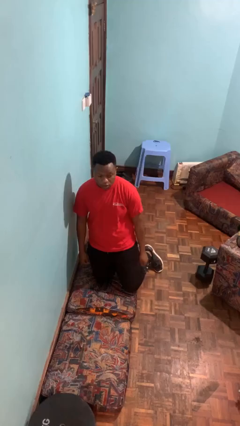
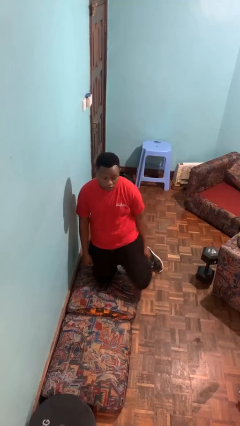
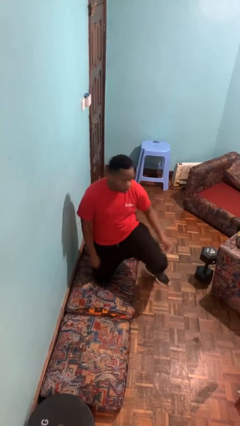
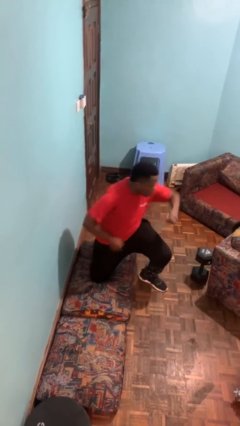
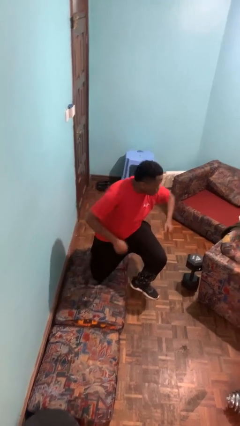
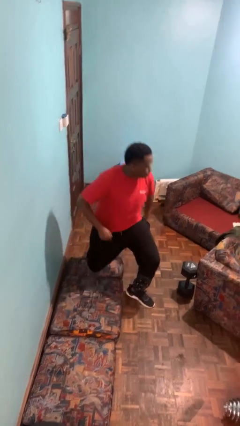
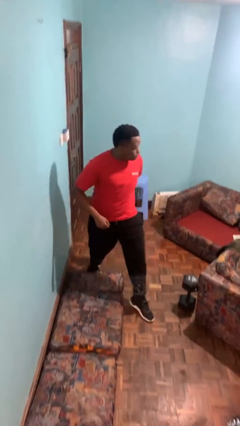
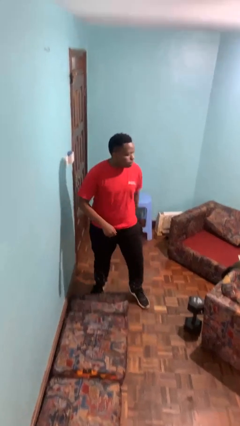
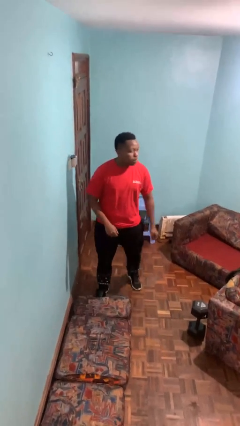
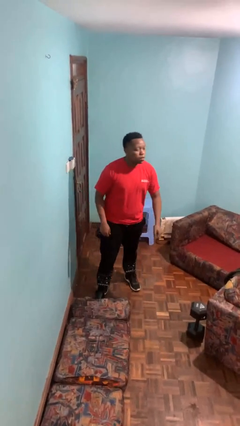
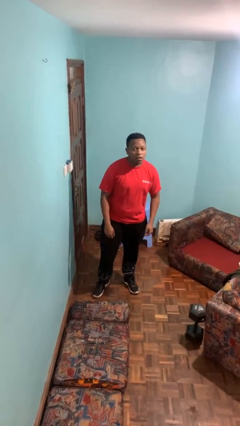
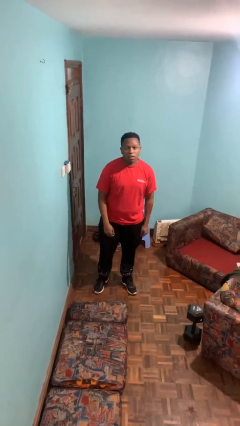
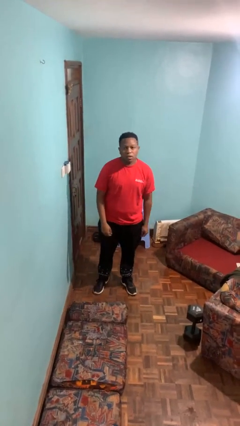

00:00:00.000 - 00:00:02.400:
person stands up from floor

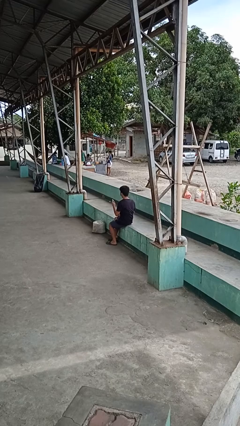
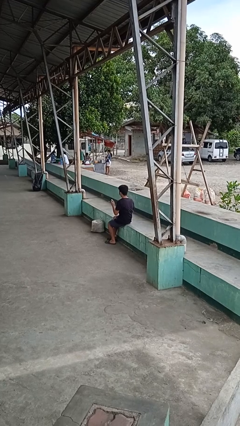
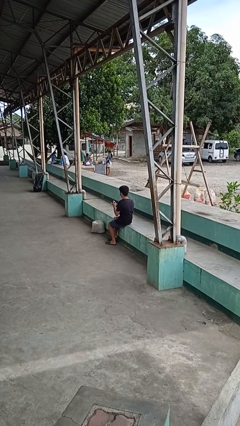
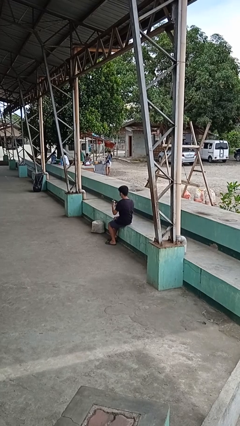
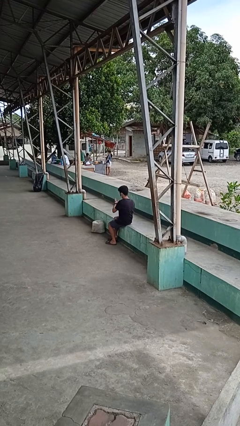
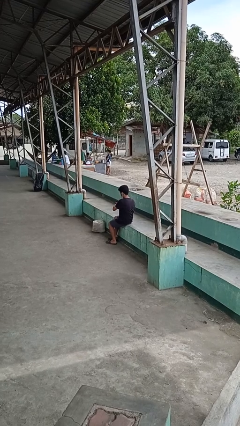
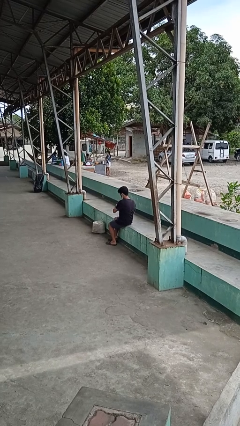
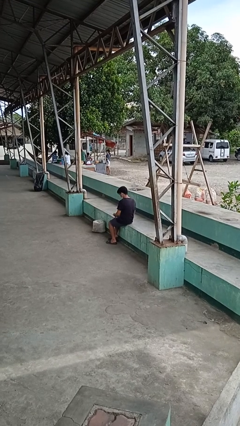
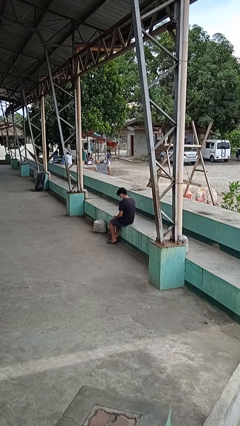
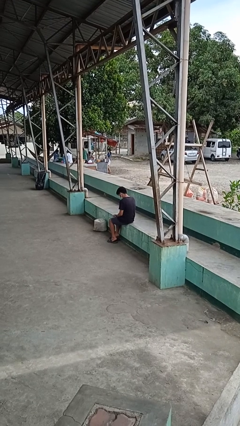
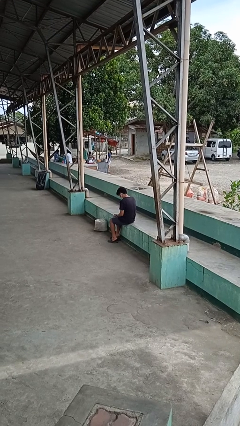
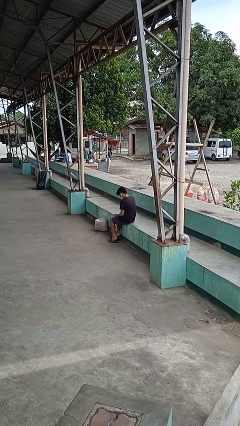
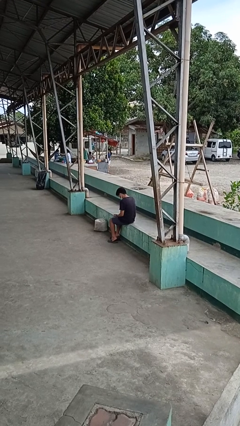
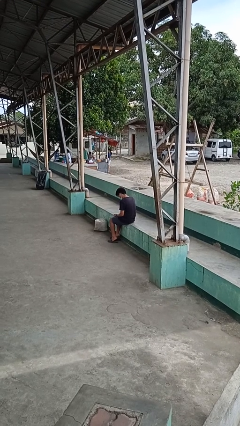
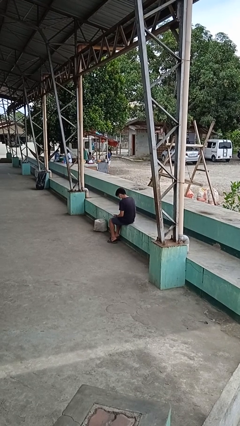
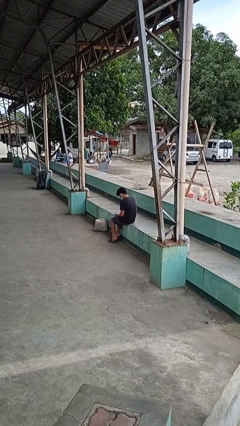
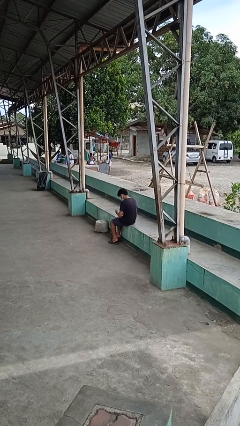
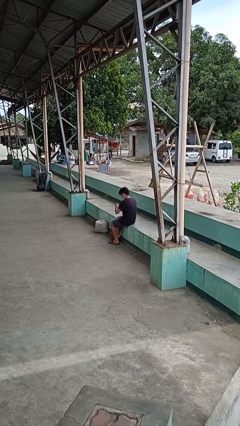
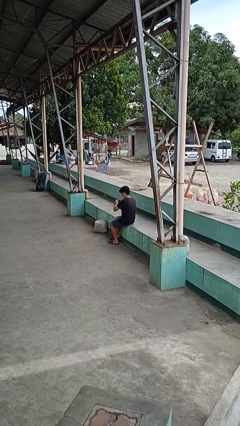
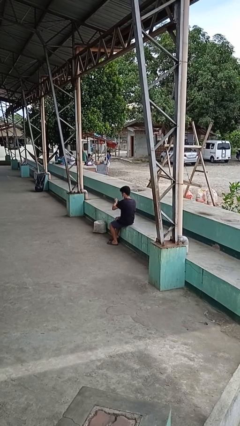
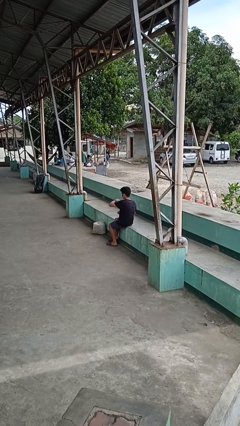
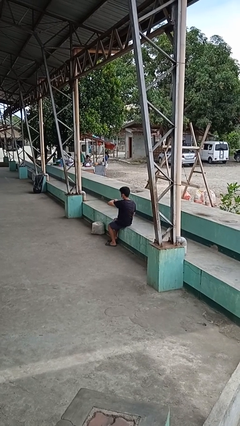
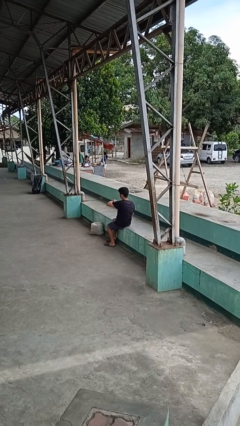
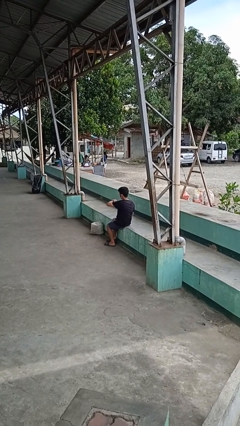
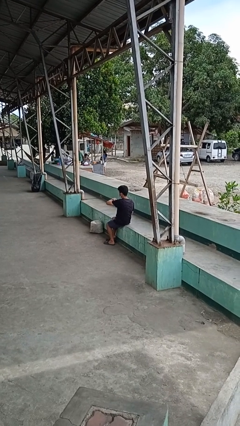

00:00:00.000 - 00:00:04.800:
person puts on wristwatch

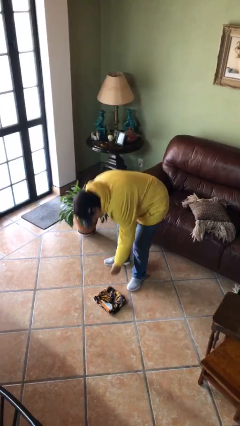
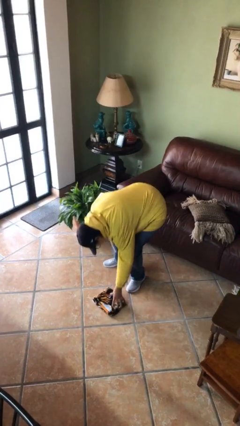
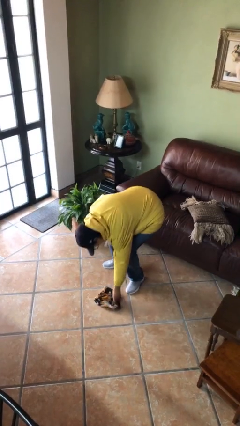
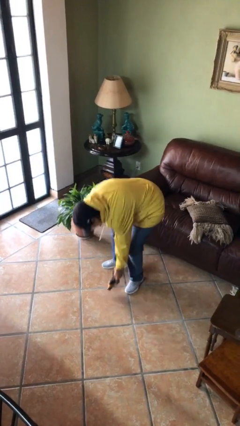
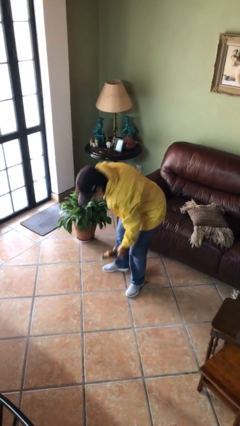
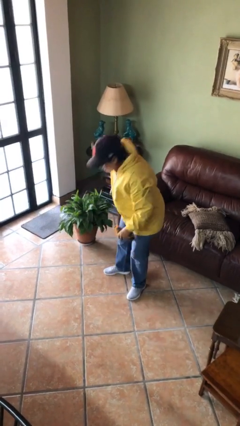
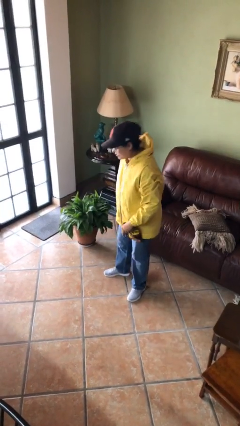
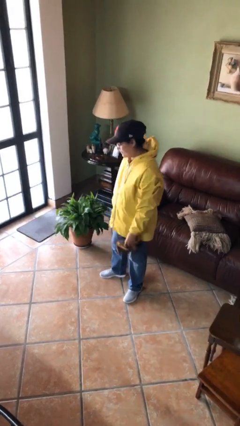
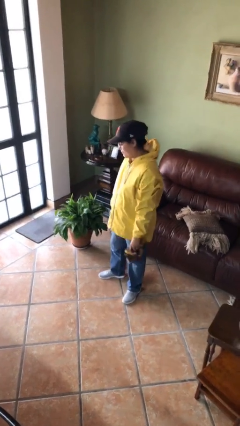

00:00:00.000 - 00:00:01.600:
person picks up object from floor

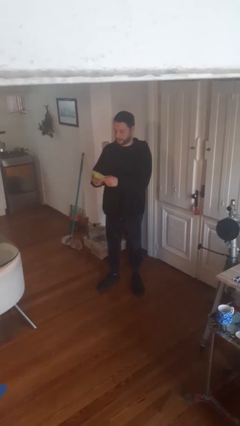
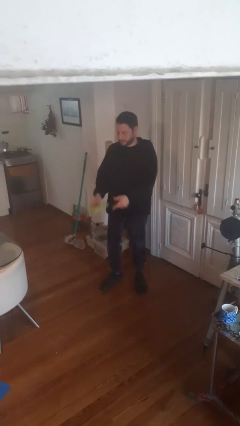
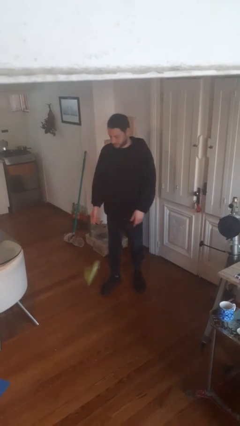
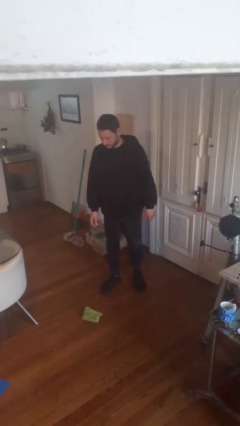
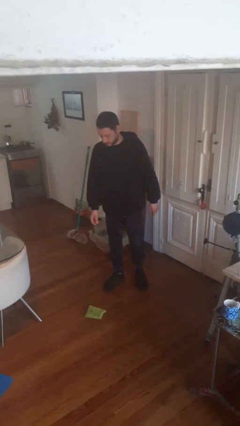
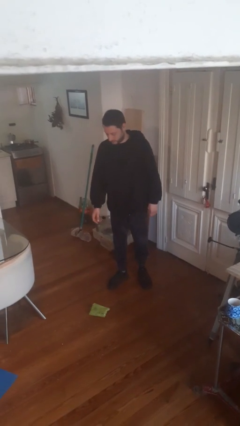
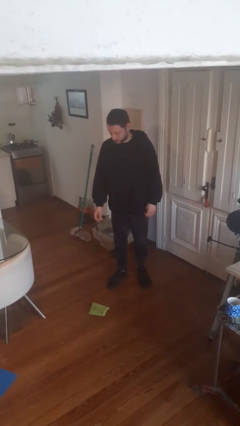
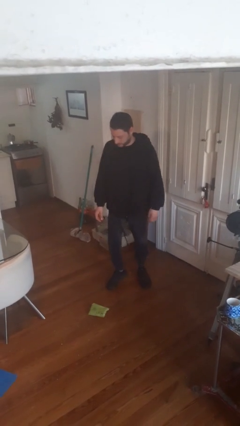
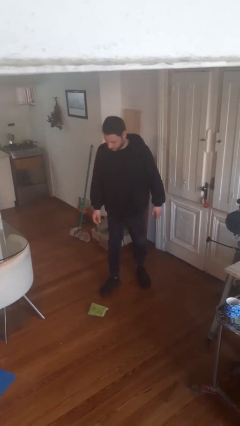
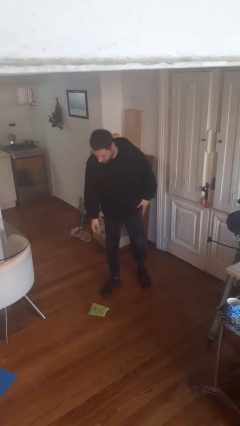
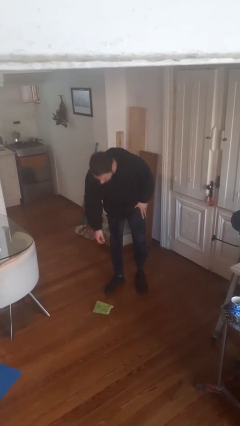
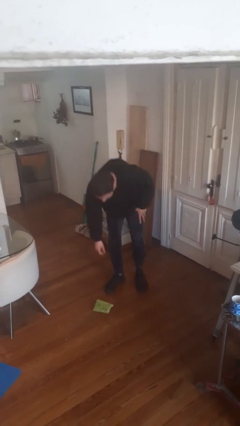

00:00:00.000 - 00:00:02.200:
person drops object

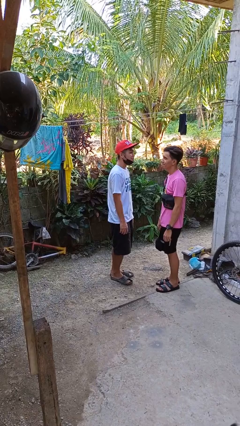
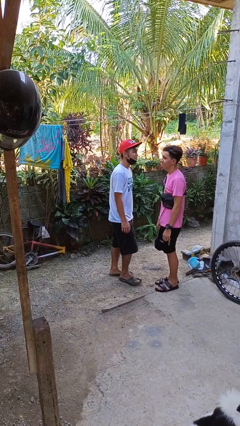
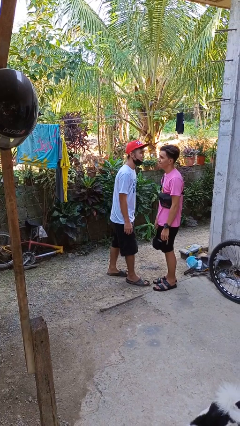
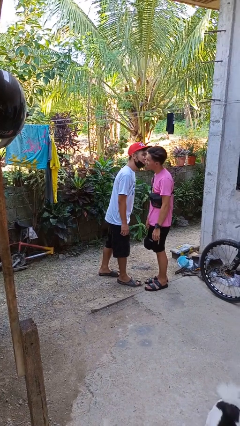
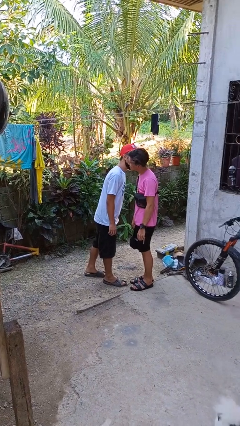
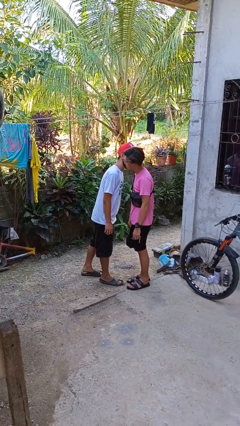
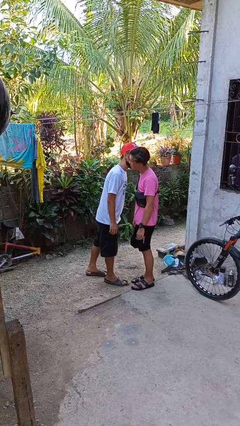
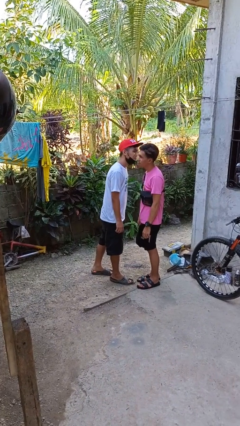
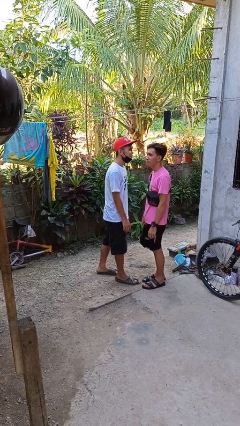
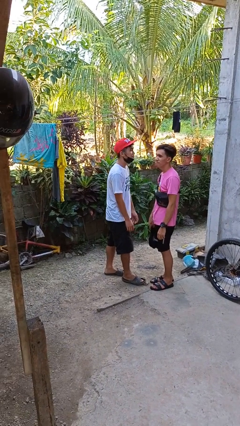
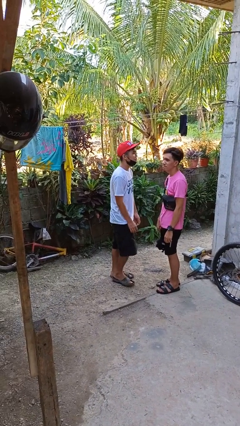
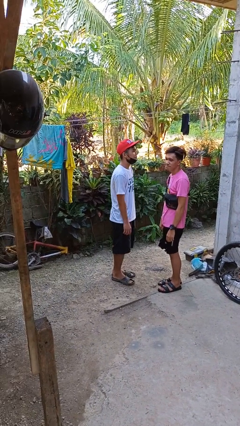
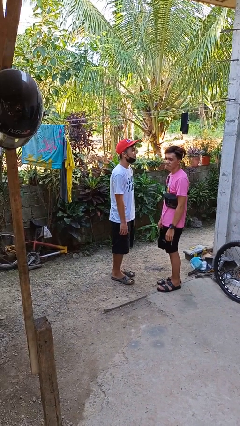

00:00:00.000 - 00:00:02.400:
person kisses cheek of person

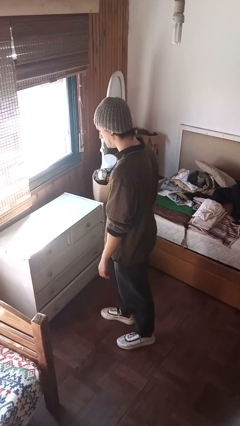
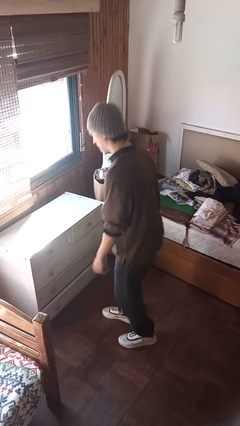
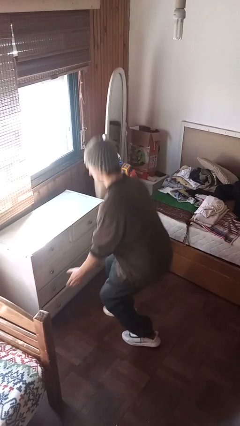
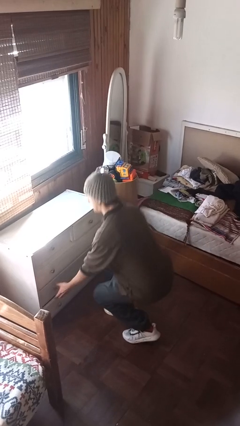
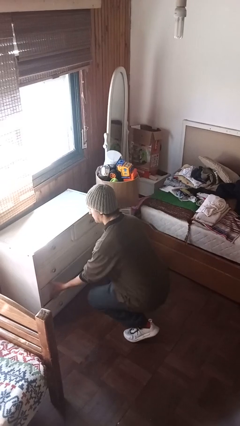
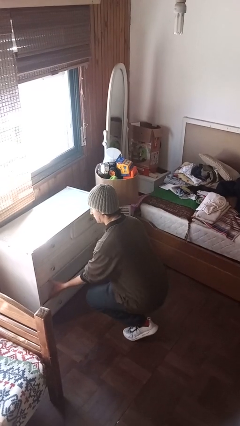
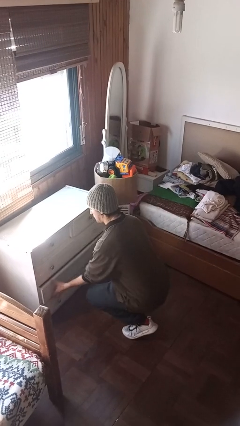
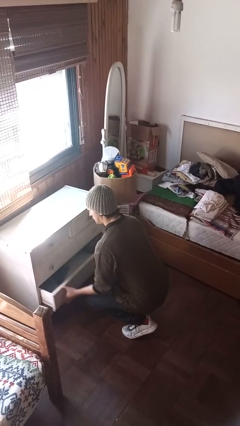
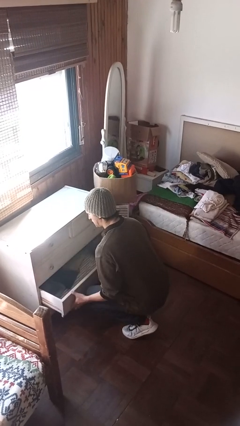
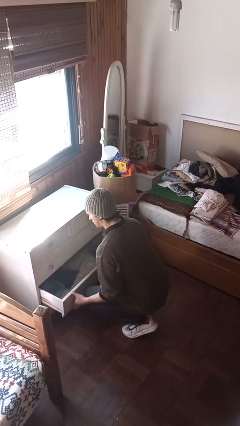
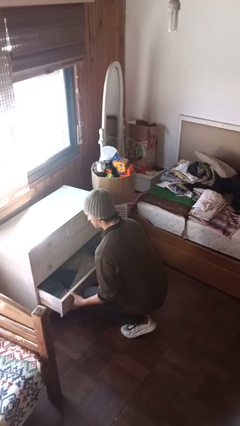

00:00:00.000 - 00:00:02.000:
person opens dresser drawer

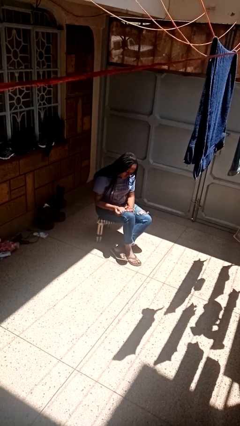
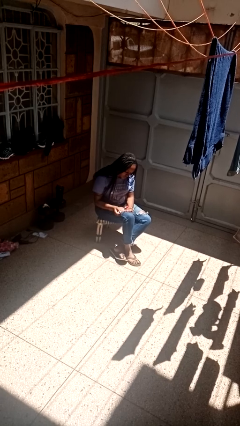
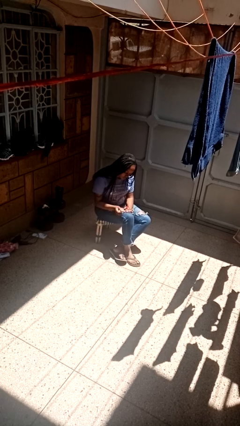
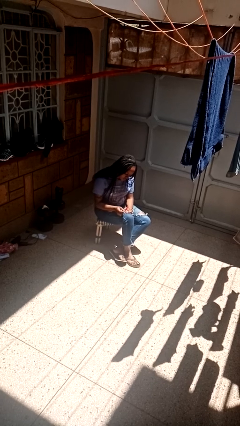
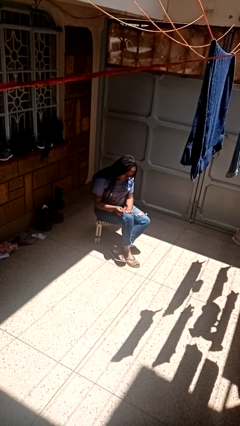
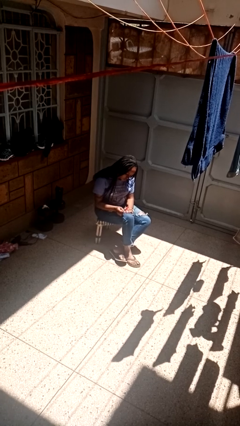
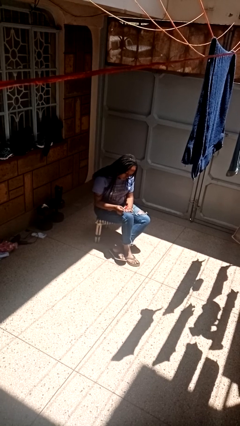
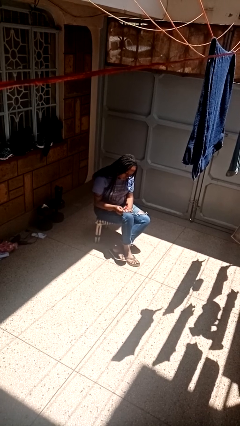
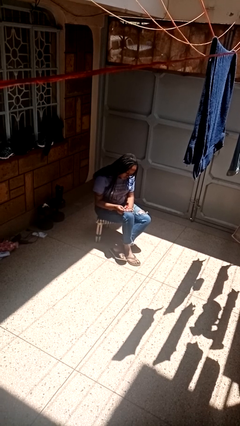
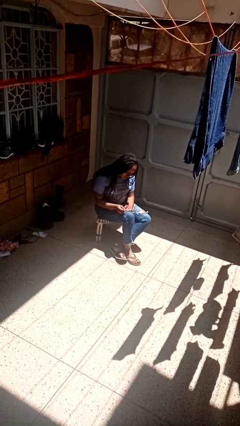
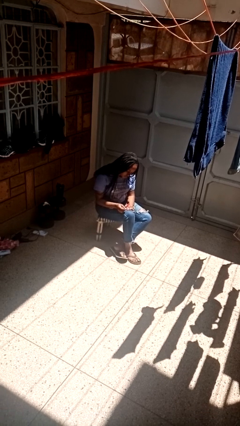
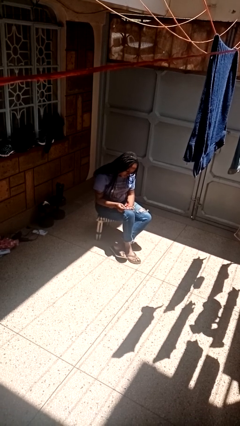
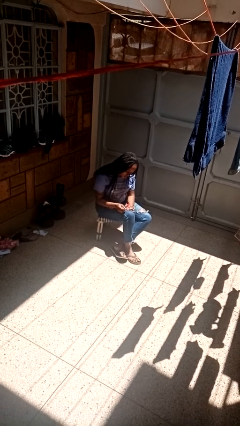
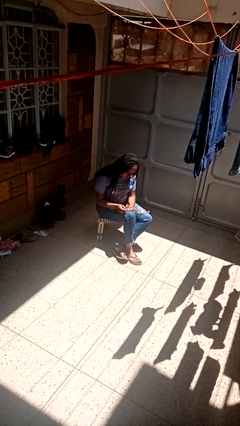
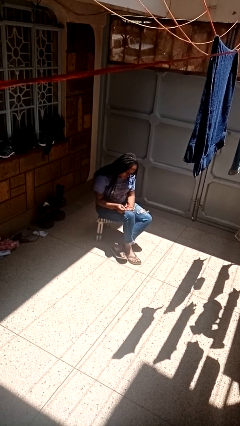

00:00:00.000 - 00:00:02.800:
person paints fingernails
